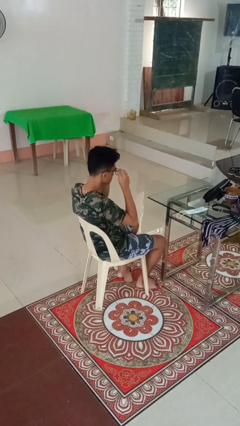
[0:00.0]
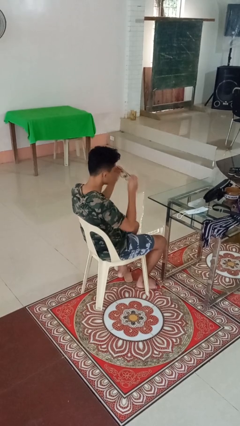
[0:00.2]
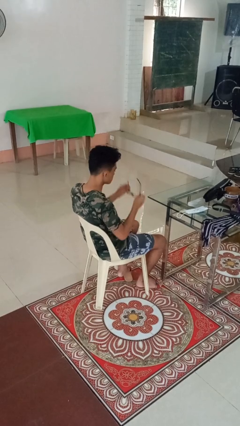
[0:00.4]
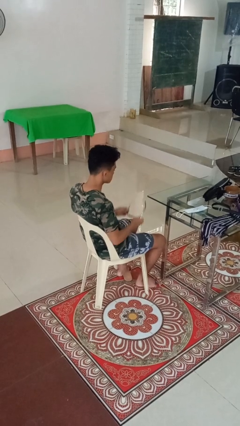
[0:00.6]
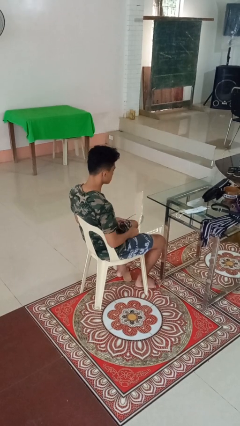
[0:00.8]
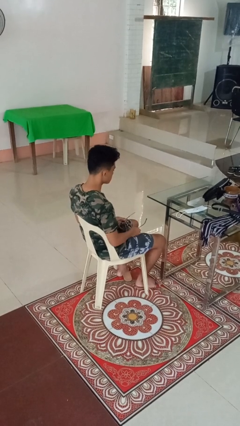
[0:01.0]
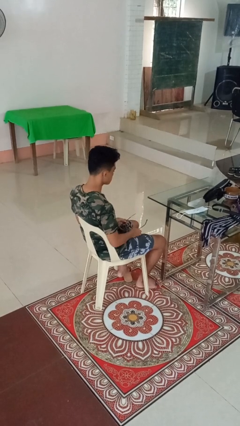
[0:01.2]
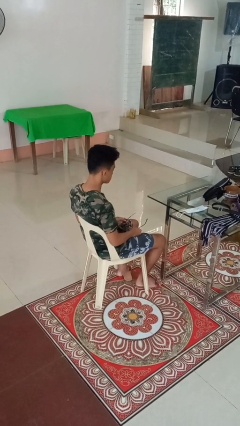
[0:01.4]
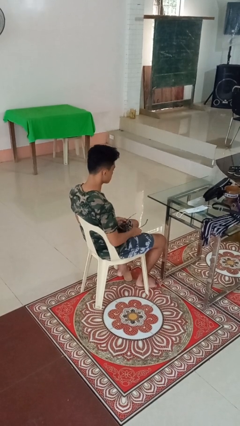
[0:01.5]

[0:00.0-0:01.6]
person takes off glasses

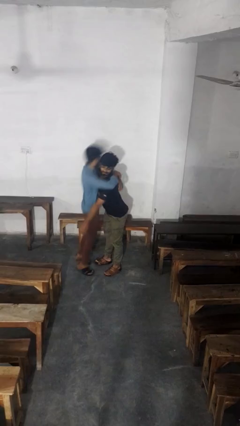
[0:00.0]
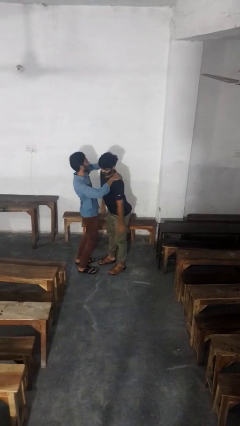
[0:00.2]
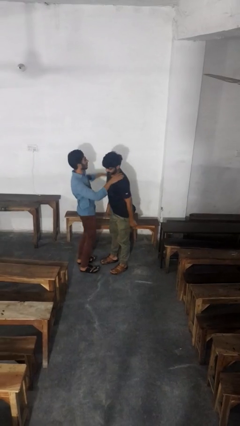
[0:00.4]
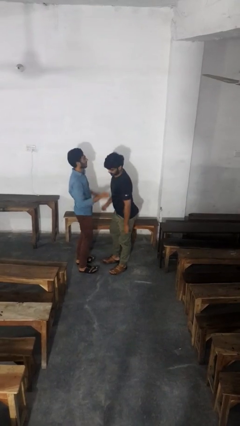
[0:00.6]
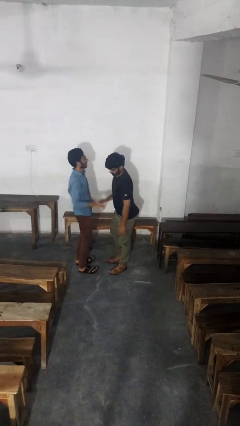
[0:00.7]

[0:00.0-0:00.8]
person puts down person

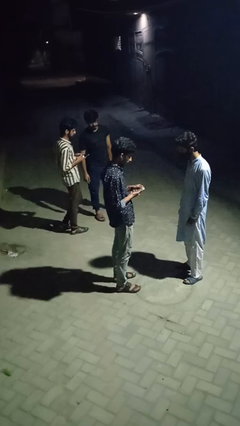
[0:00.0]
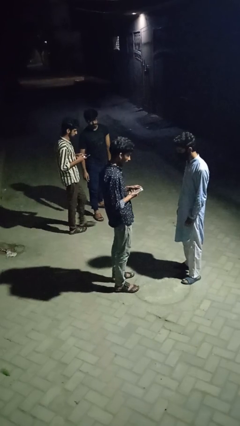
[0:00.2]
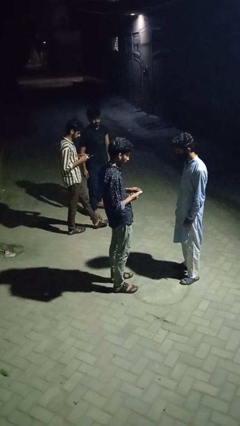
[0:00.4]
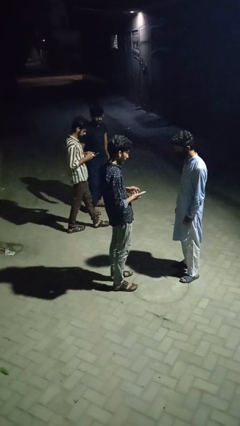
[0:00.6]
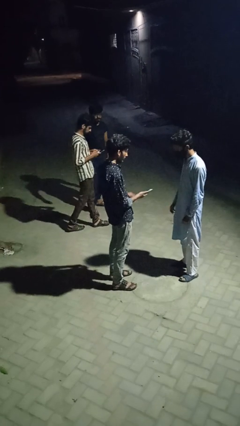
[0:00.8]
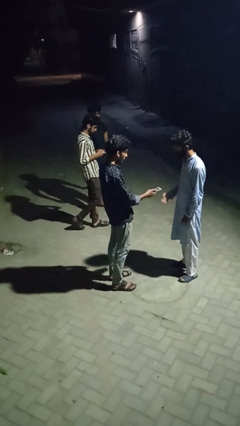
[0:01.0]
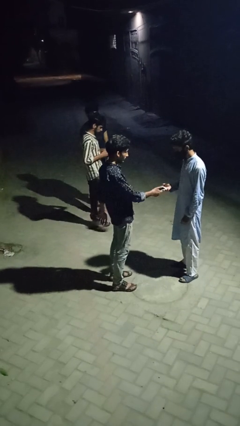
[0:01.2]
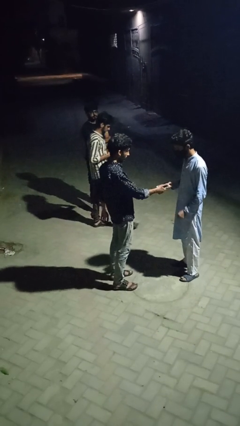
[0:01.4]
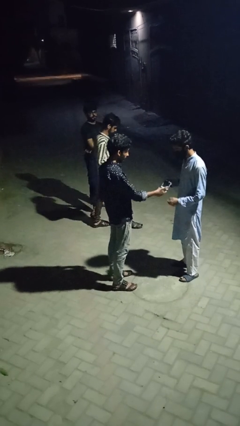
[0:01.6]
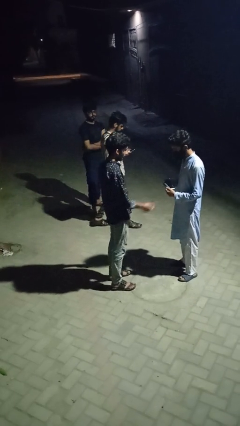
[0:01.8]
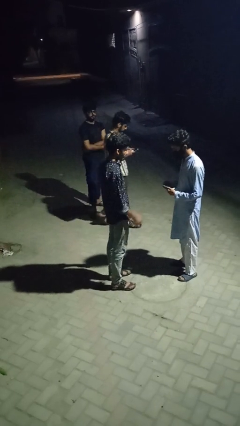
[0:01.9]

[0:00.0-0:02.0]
person transfers object to person

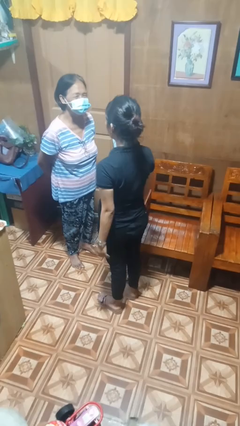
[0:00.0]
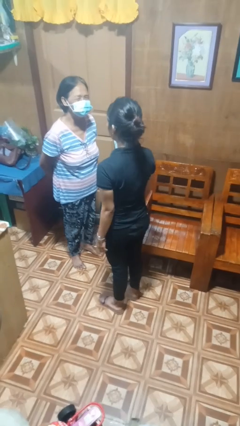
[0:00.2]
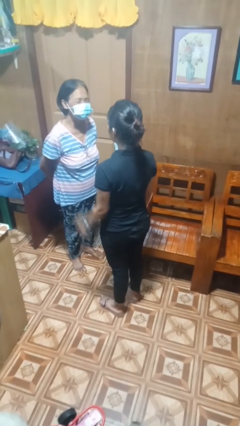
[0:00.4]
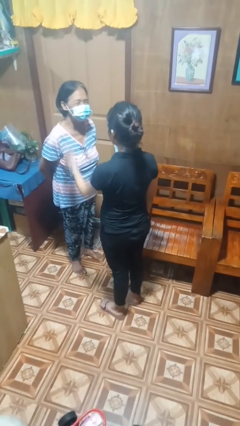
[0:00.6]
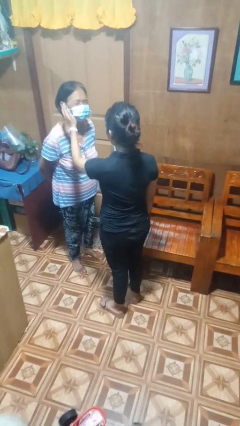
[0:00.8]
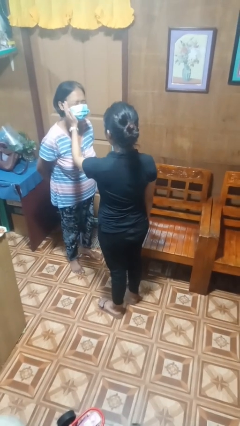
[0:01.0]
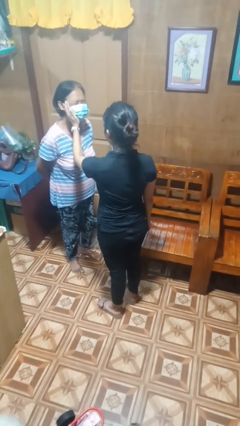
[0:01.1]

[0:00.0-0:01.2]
person touches face of person

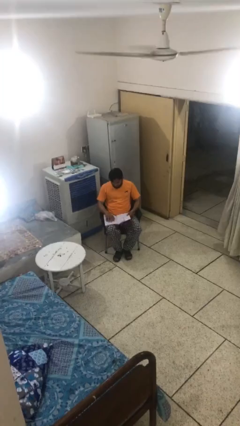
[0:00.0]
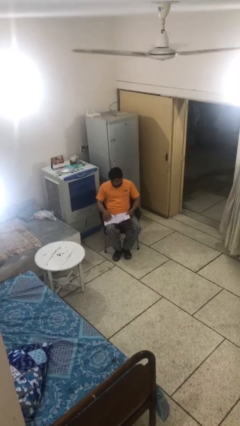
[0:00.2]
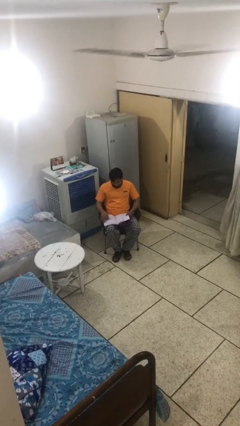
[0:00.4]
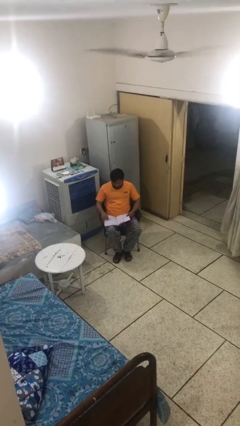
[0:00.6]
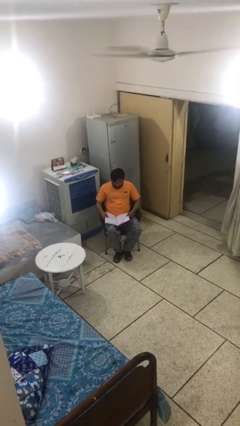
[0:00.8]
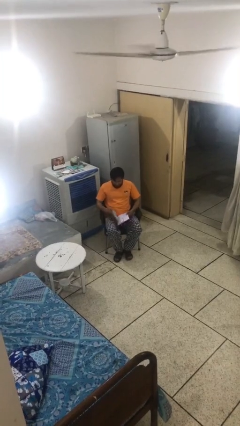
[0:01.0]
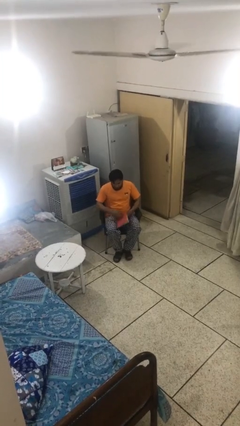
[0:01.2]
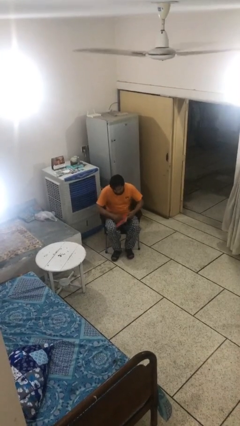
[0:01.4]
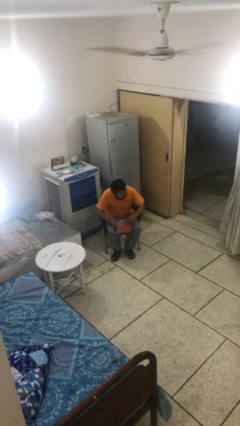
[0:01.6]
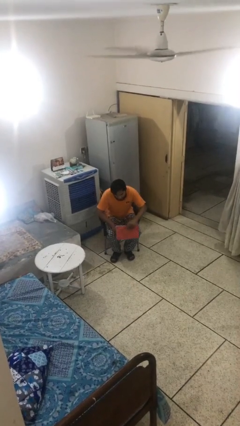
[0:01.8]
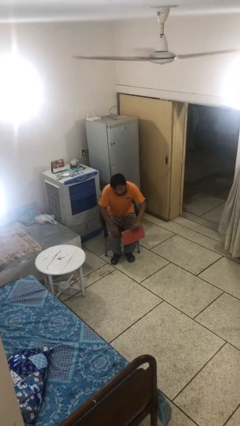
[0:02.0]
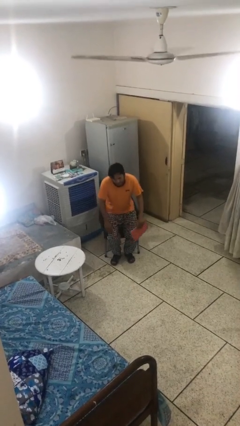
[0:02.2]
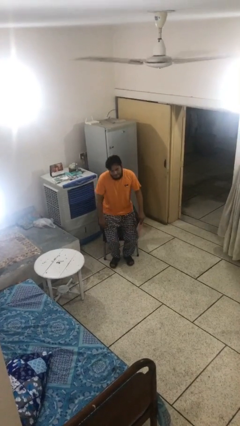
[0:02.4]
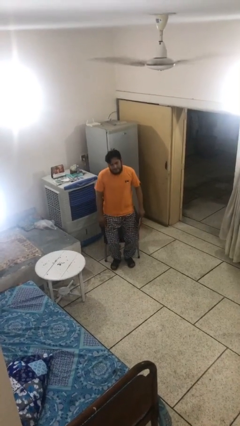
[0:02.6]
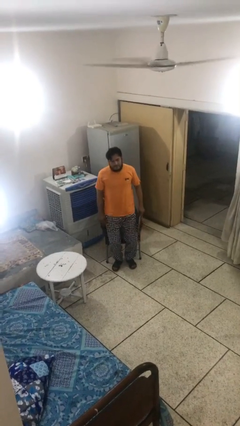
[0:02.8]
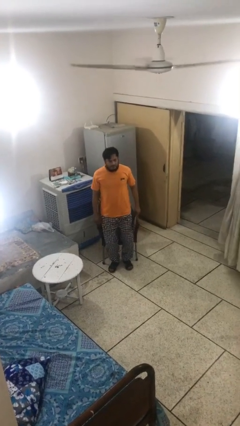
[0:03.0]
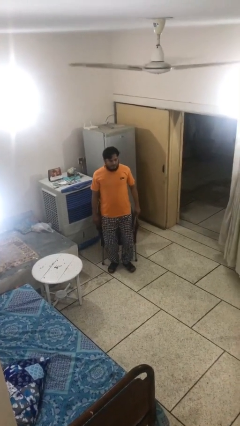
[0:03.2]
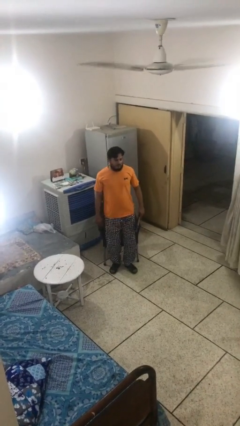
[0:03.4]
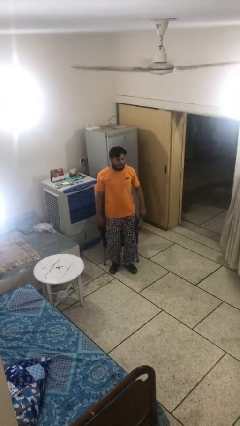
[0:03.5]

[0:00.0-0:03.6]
person stands up

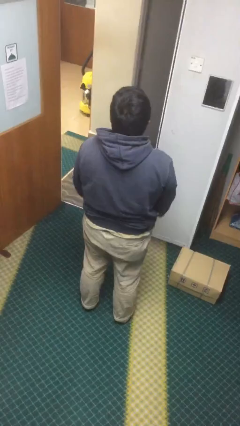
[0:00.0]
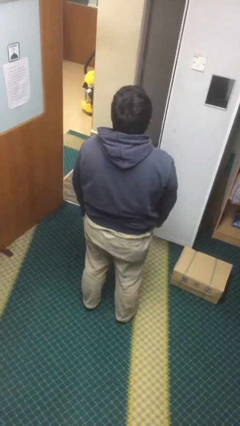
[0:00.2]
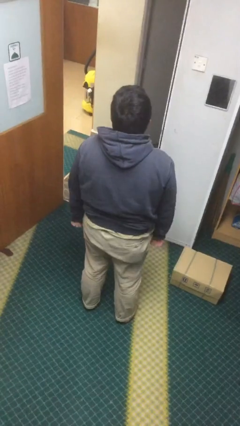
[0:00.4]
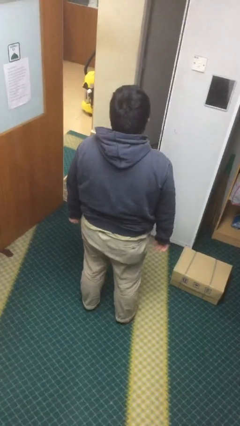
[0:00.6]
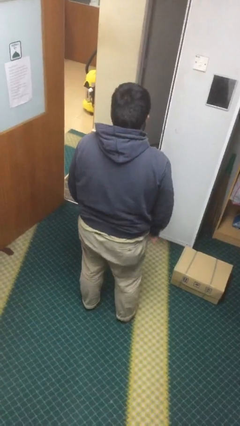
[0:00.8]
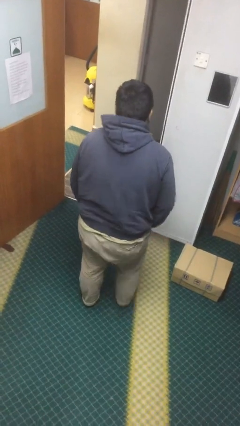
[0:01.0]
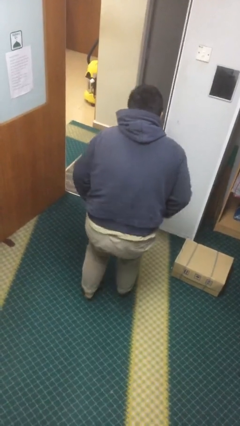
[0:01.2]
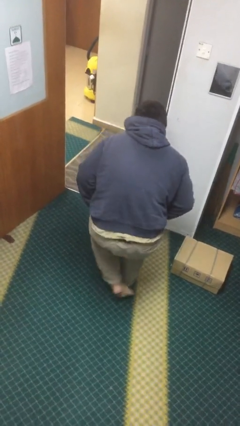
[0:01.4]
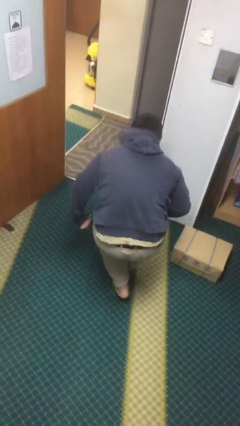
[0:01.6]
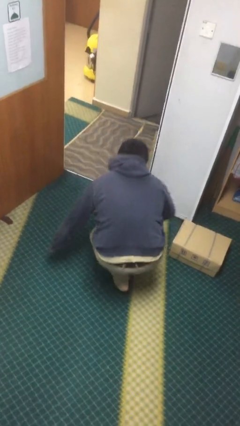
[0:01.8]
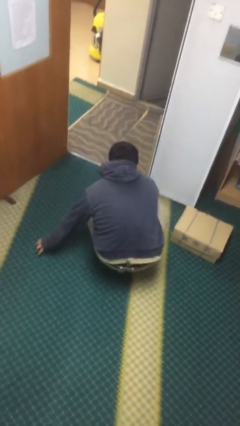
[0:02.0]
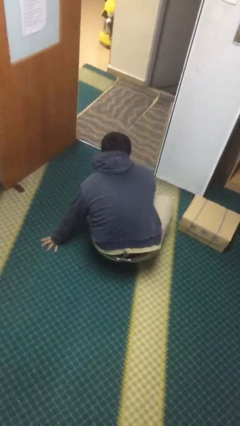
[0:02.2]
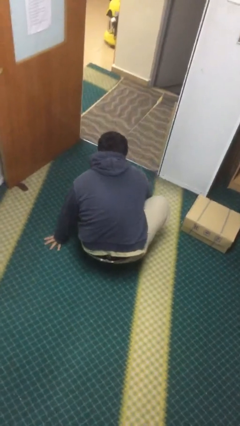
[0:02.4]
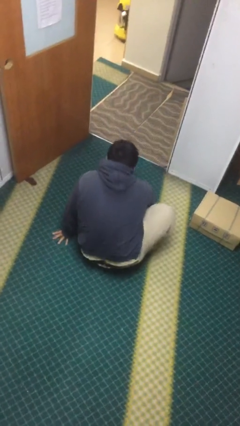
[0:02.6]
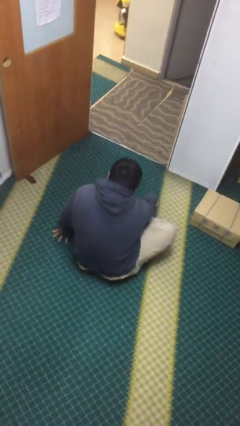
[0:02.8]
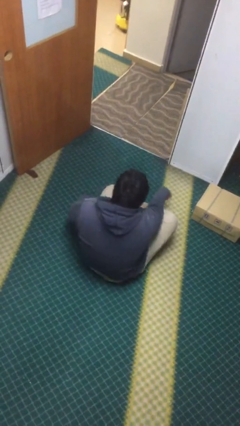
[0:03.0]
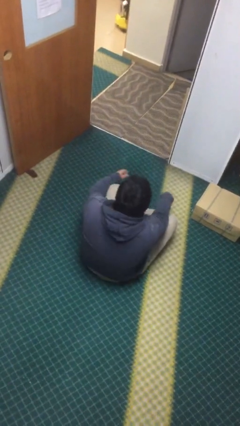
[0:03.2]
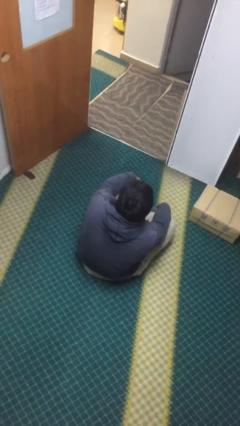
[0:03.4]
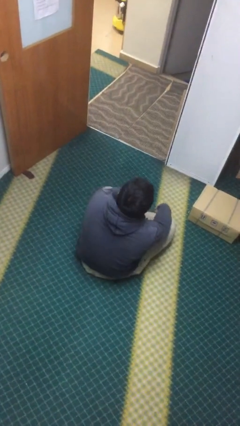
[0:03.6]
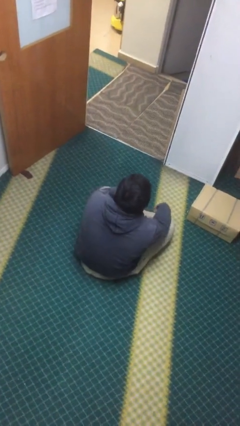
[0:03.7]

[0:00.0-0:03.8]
person sits crisscross

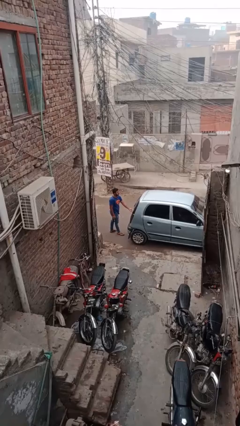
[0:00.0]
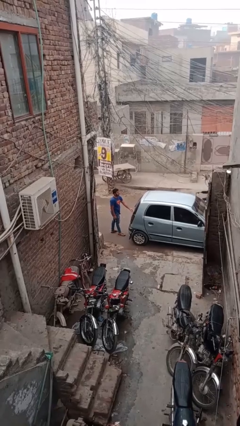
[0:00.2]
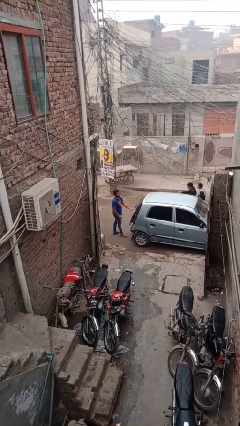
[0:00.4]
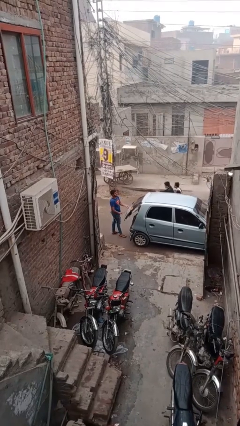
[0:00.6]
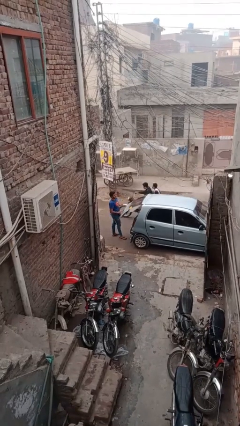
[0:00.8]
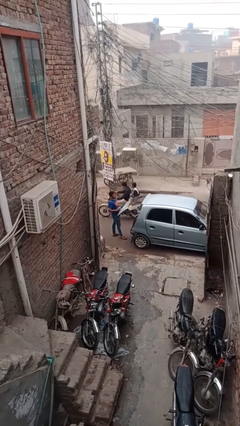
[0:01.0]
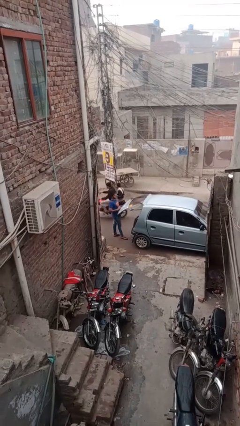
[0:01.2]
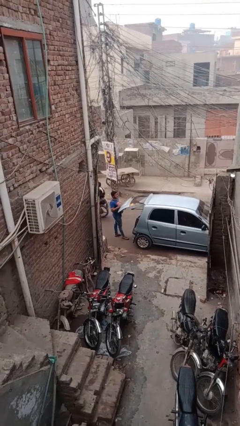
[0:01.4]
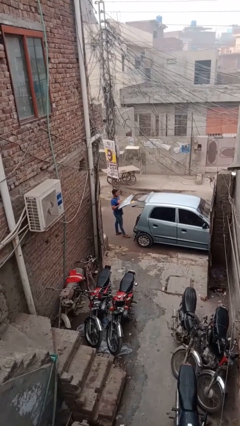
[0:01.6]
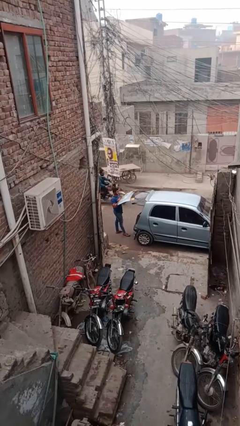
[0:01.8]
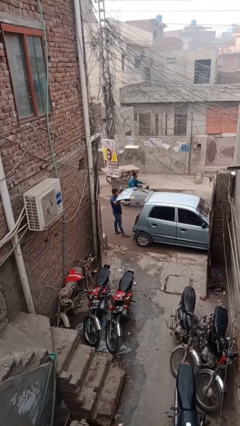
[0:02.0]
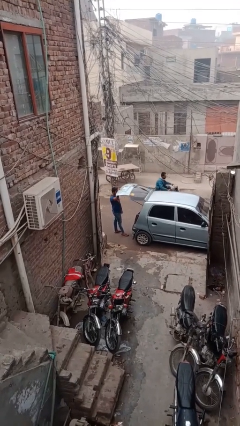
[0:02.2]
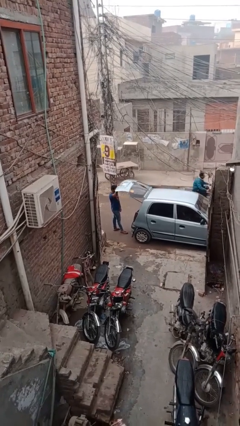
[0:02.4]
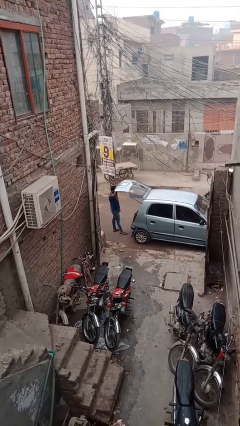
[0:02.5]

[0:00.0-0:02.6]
person opens car trunk

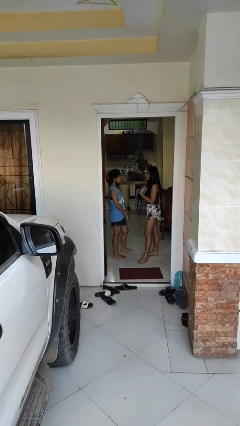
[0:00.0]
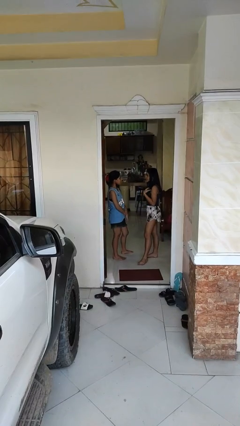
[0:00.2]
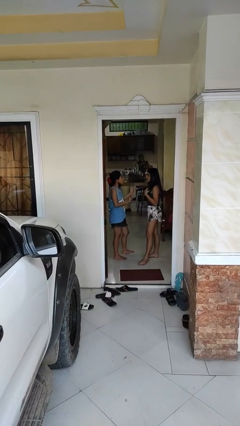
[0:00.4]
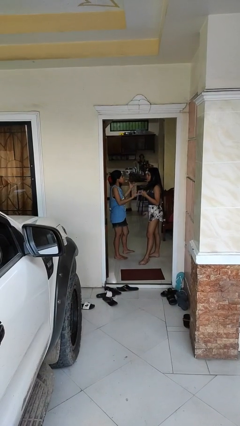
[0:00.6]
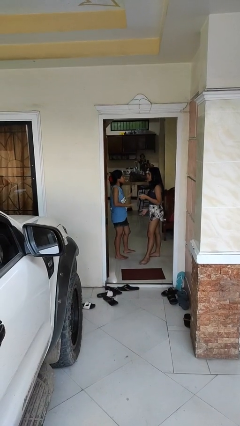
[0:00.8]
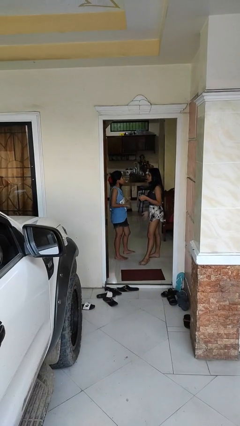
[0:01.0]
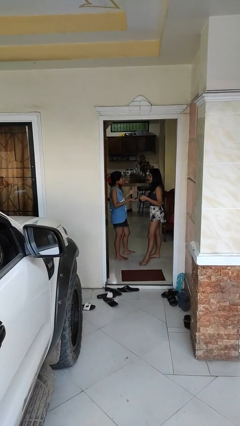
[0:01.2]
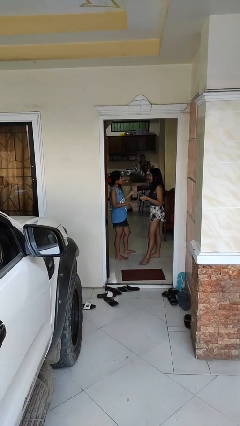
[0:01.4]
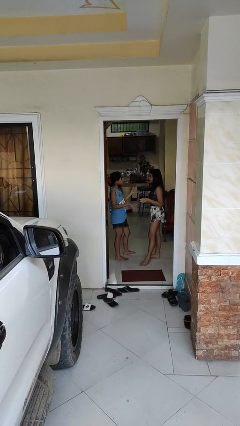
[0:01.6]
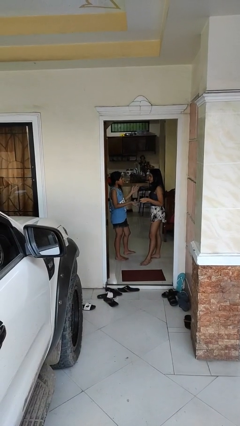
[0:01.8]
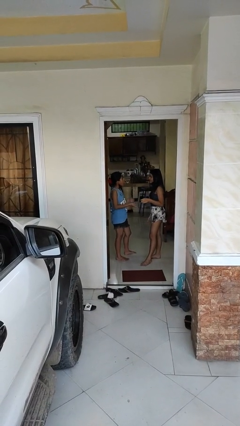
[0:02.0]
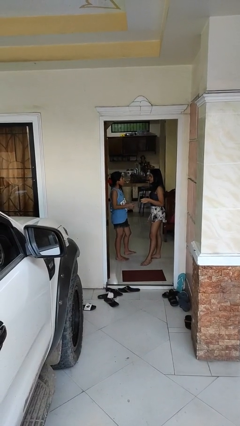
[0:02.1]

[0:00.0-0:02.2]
person talks to person
